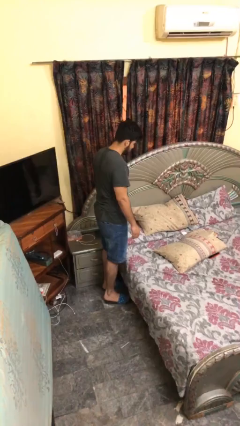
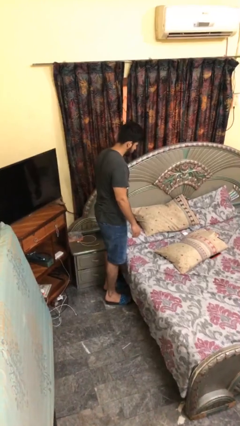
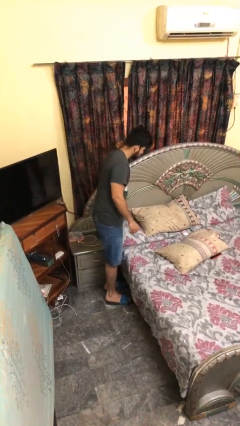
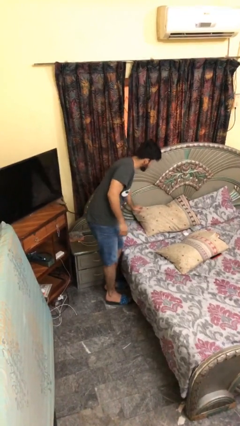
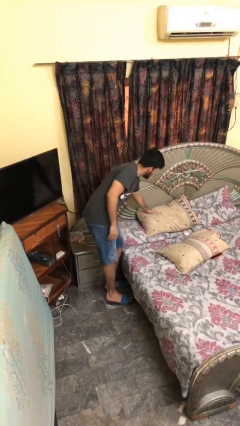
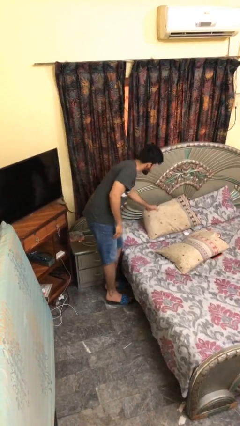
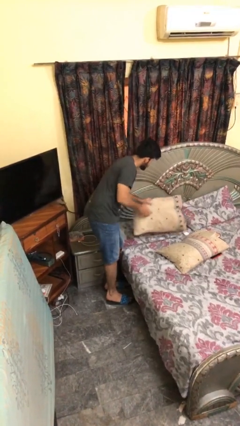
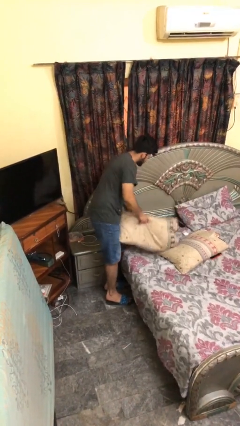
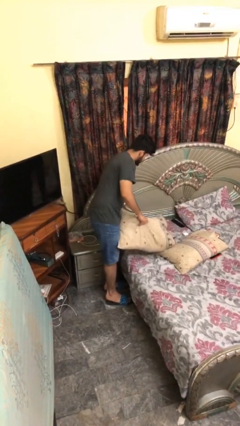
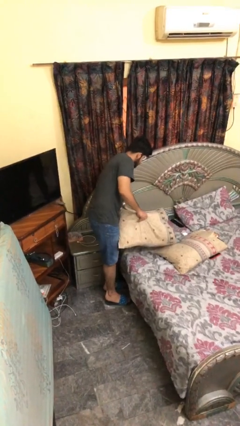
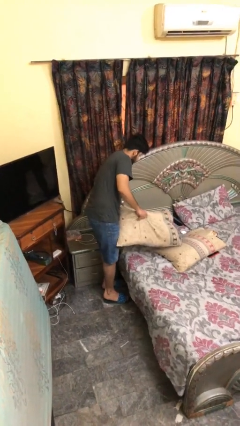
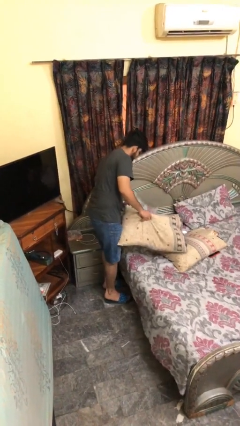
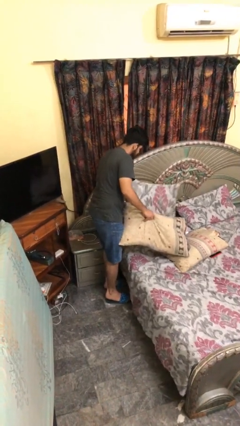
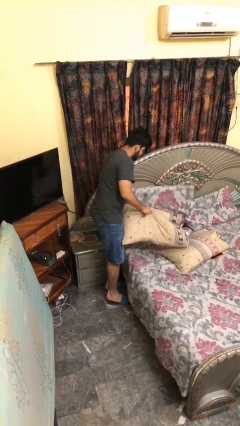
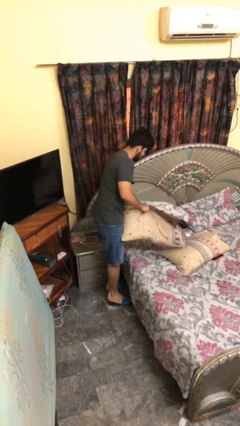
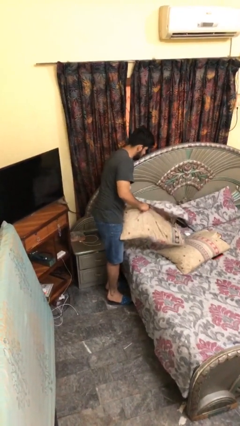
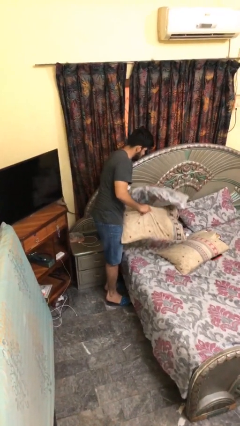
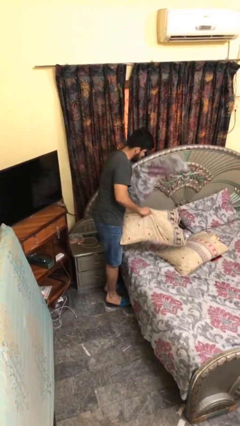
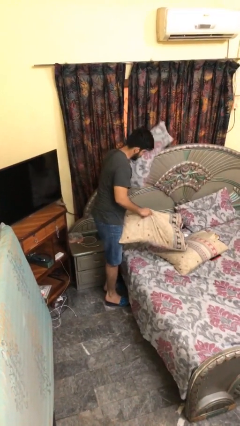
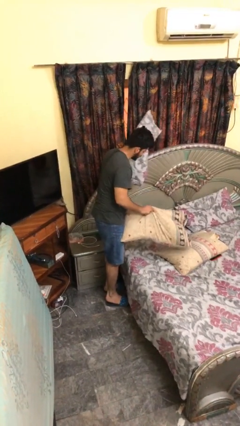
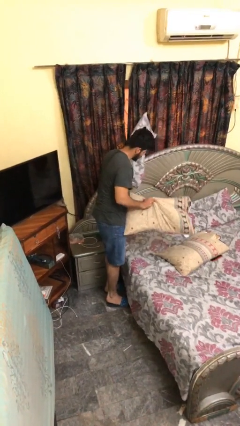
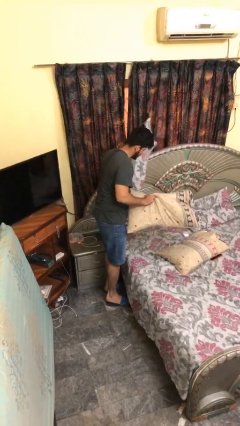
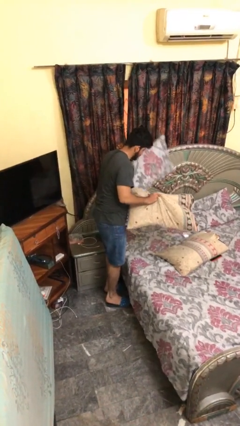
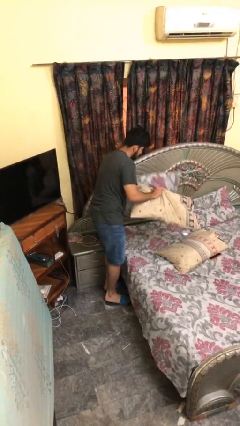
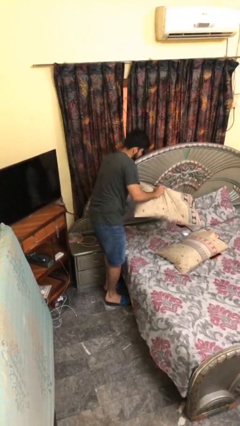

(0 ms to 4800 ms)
person searches under bed

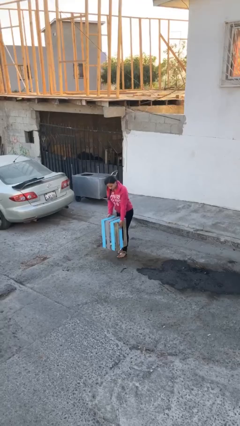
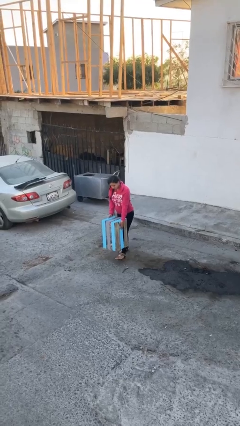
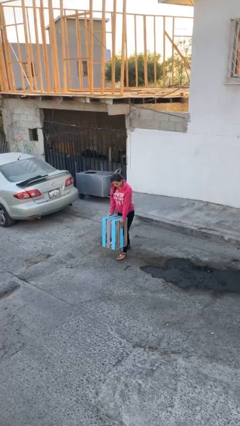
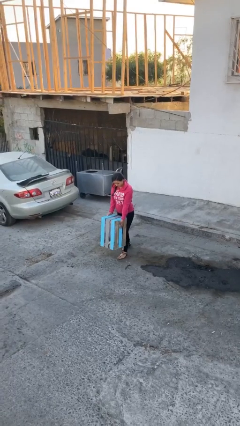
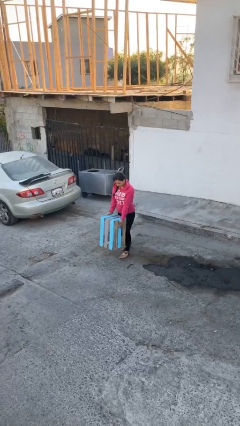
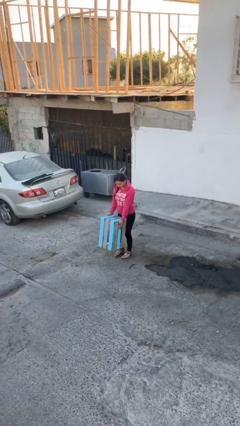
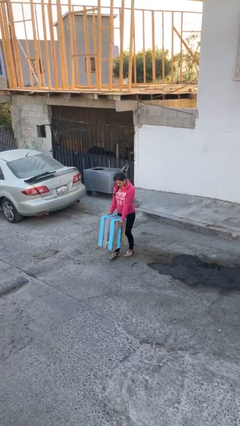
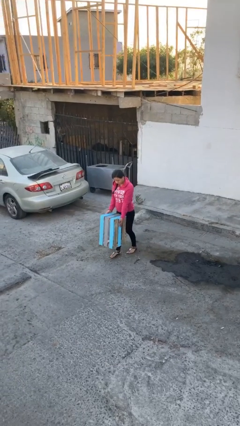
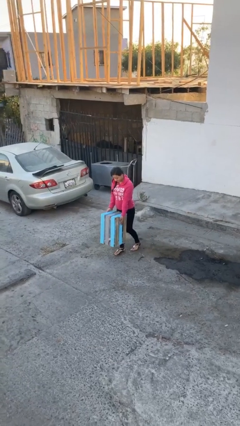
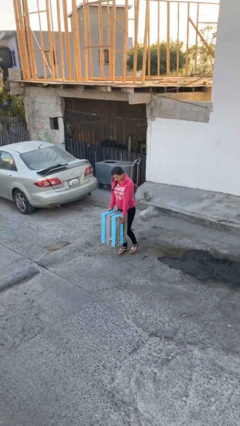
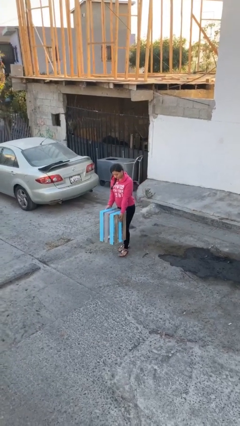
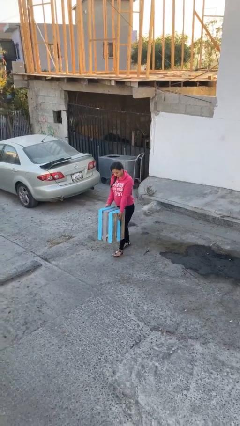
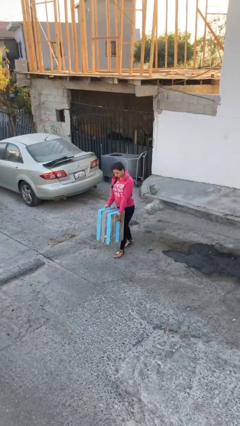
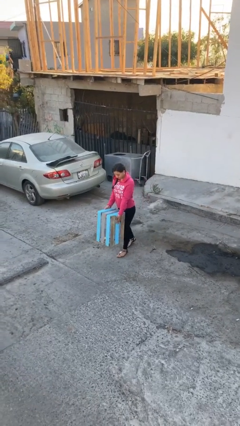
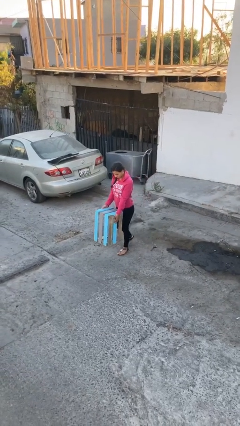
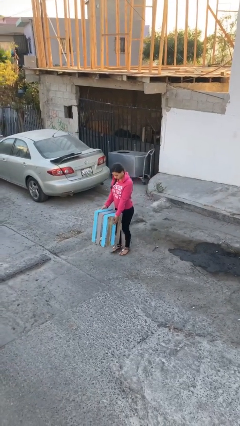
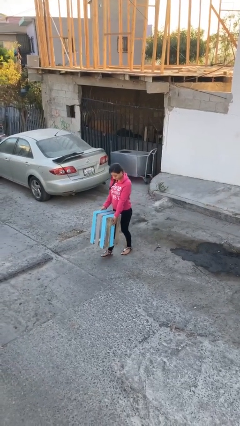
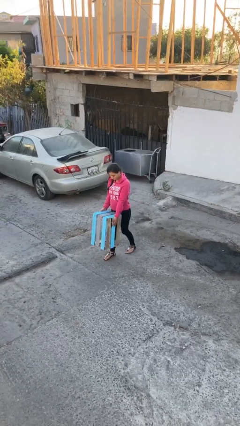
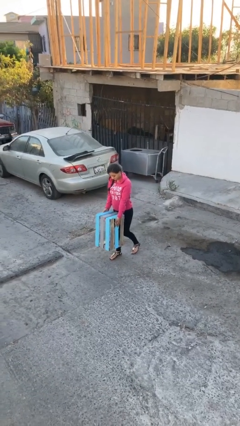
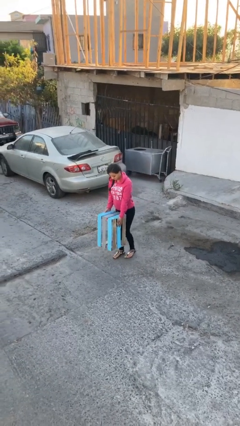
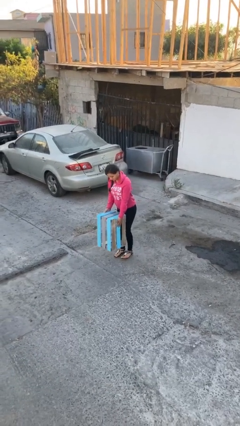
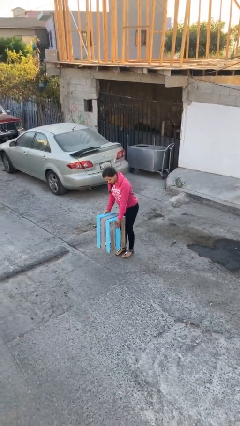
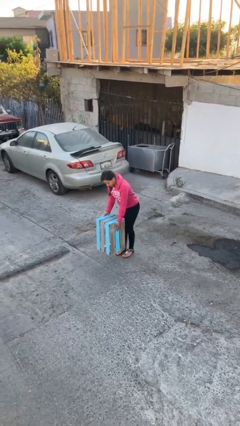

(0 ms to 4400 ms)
person carries heavy object

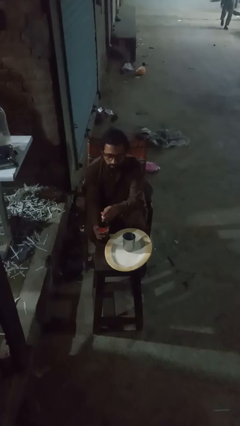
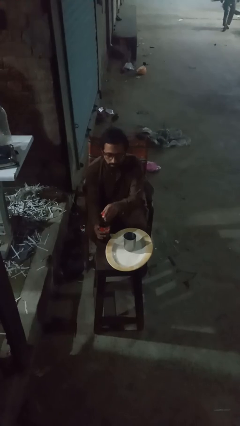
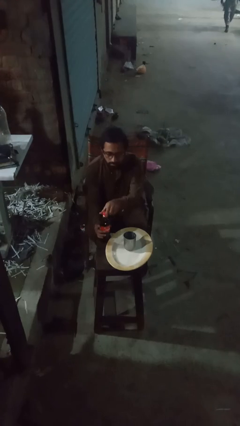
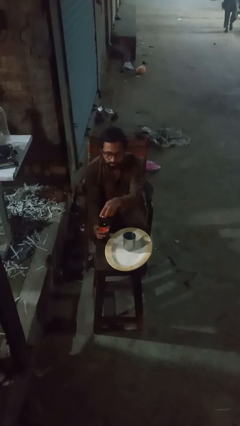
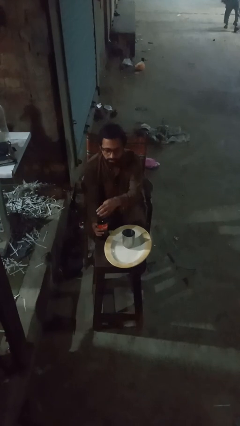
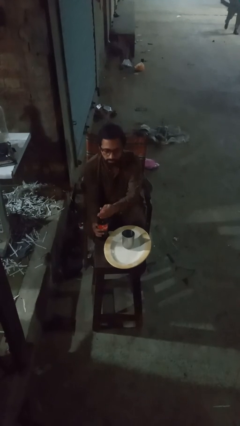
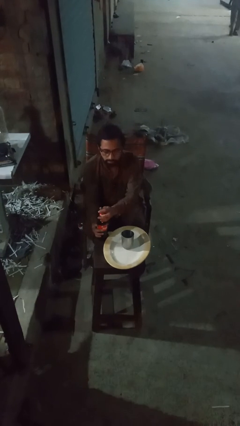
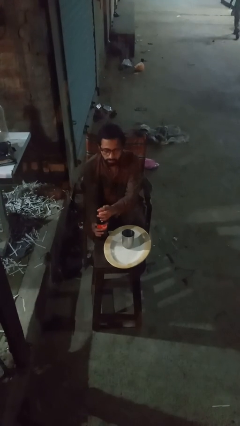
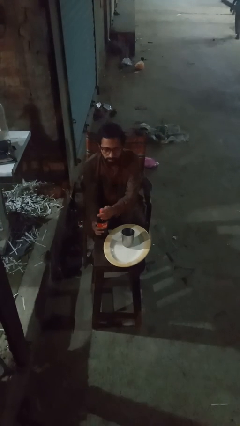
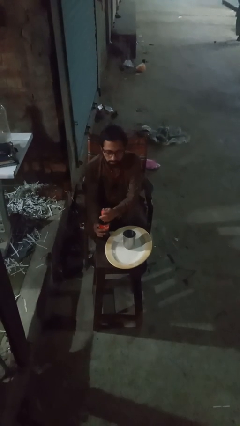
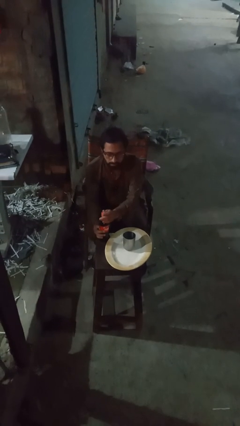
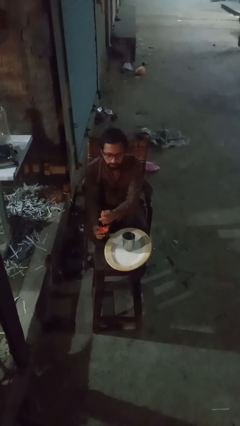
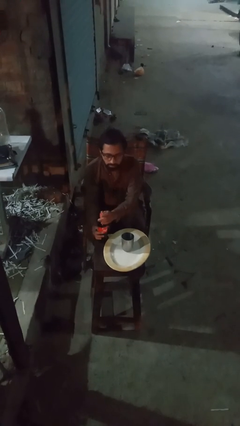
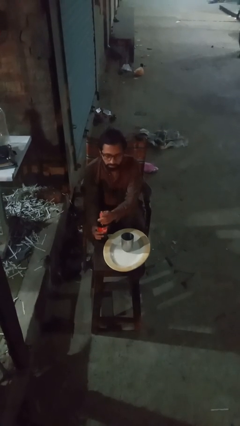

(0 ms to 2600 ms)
person screws lid to bottle

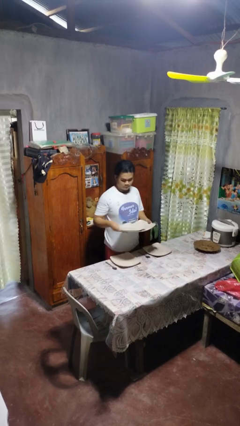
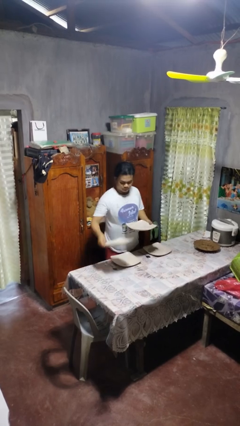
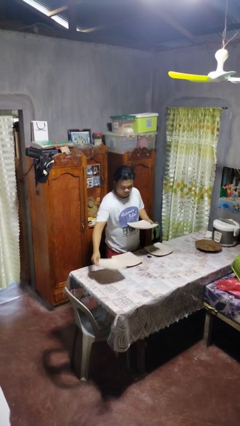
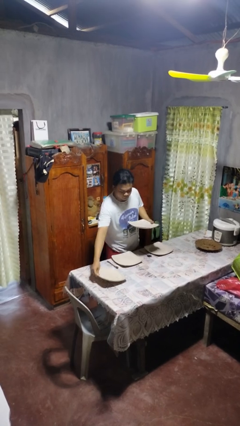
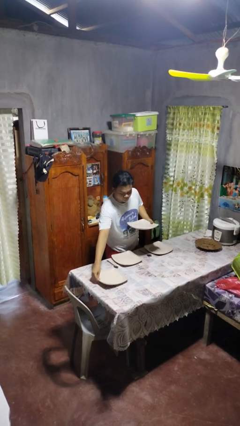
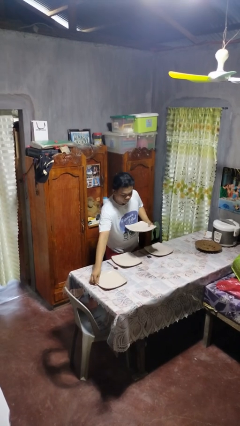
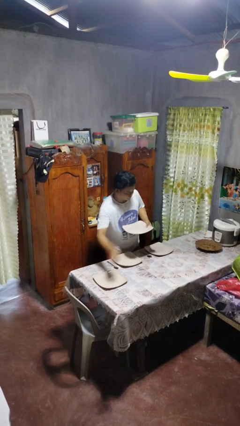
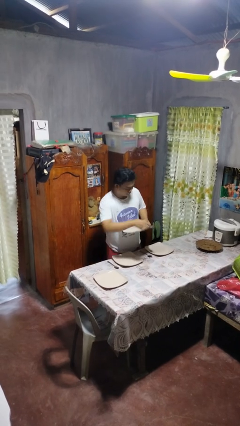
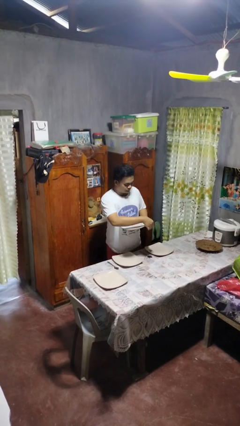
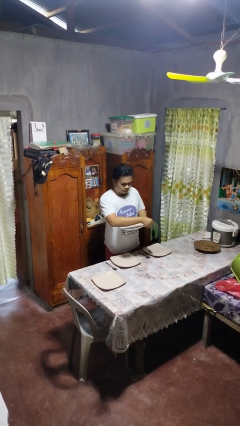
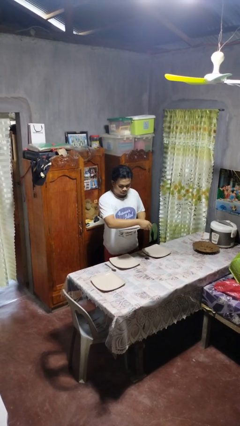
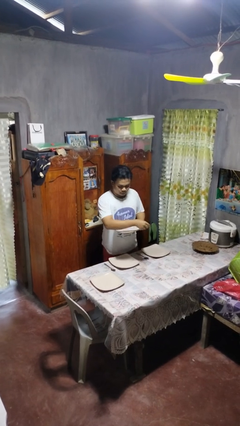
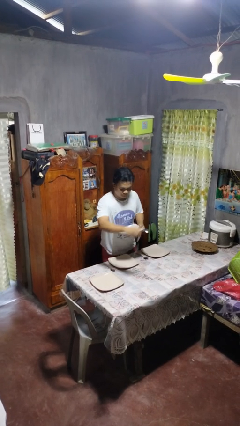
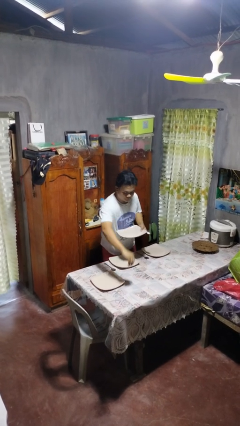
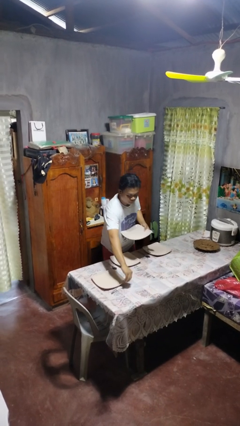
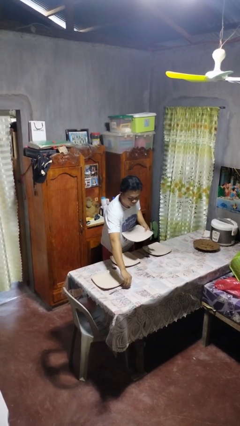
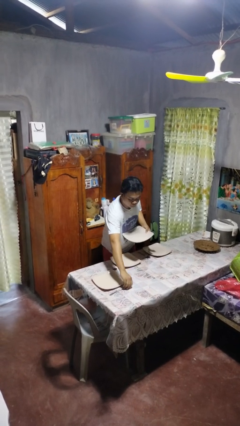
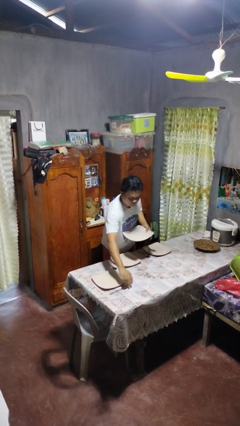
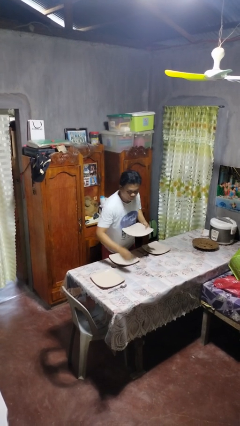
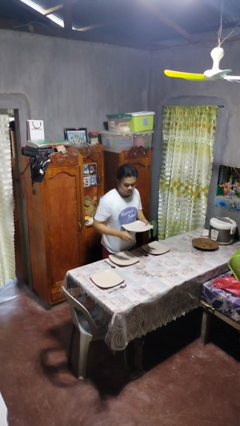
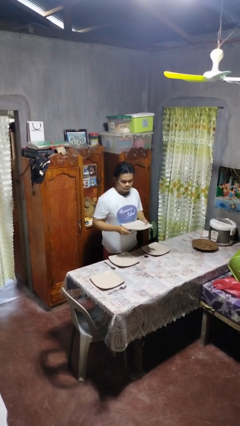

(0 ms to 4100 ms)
person sets table

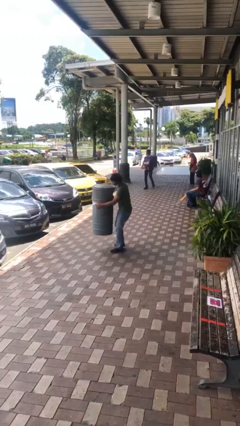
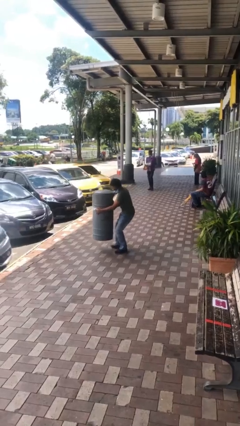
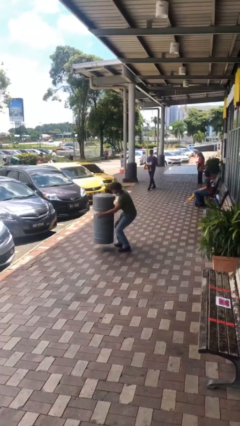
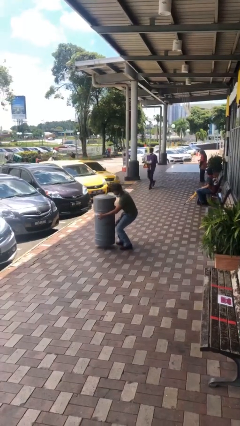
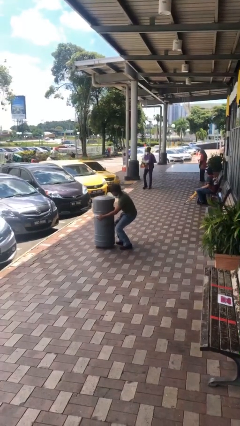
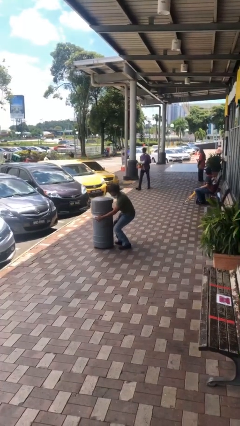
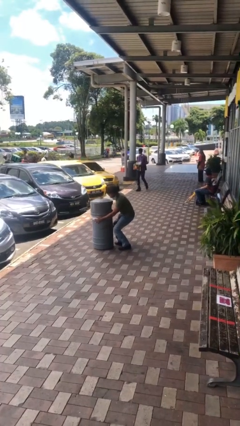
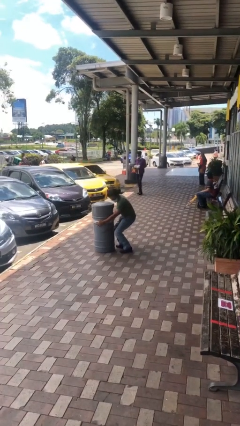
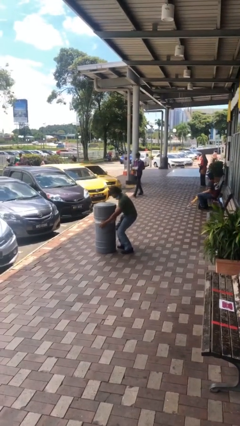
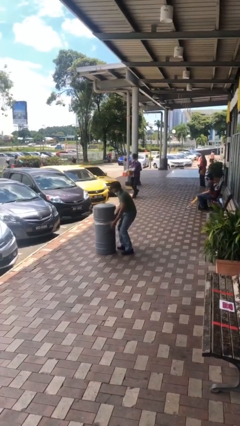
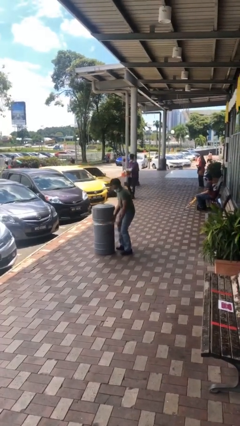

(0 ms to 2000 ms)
person puts down object on floor
